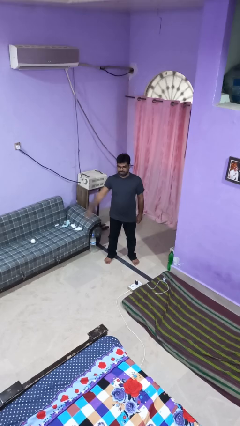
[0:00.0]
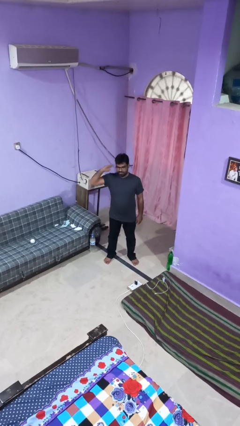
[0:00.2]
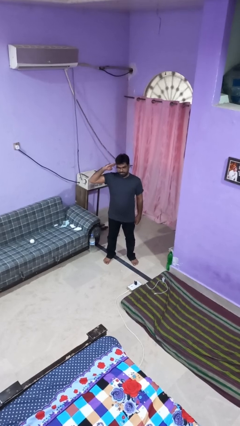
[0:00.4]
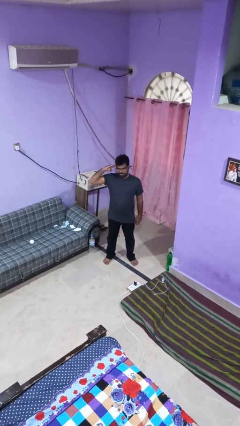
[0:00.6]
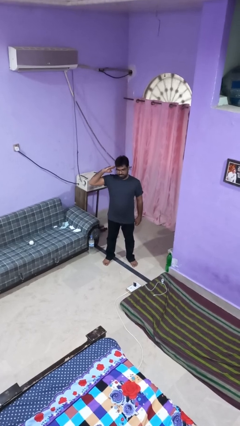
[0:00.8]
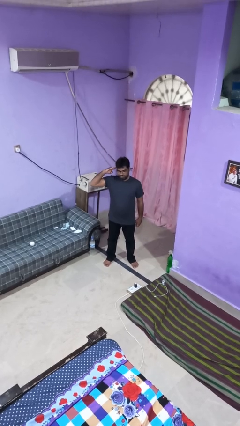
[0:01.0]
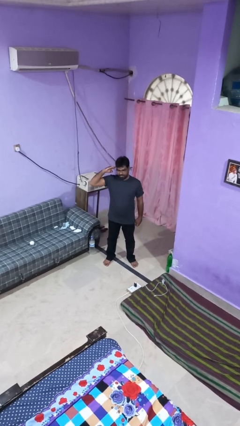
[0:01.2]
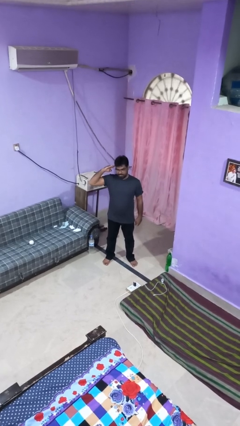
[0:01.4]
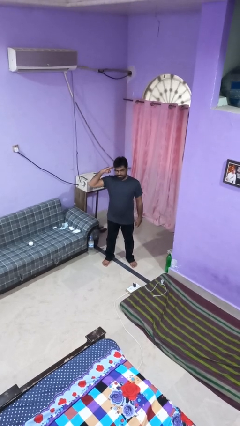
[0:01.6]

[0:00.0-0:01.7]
person salutes

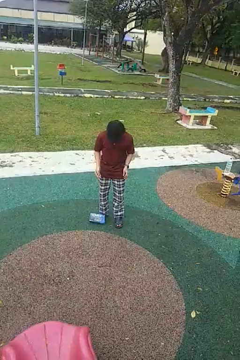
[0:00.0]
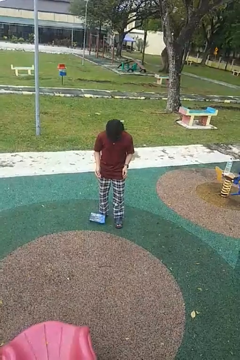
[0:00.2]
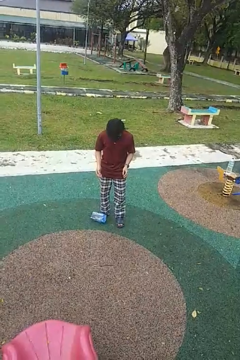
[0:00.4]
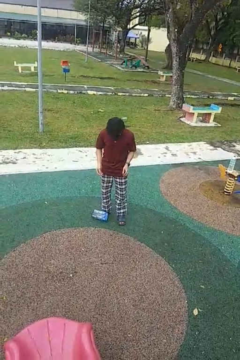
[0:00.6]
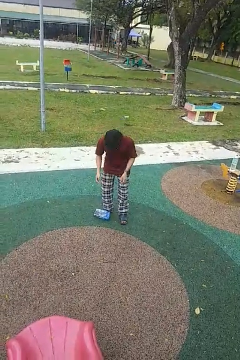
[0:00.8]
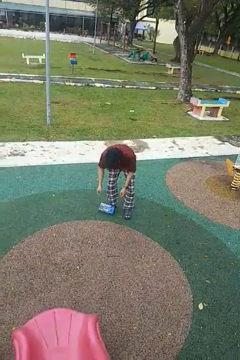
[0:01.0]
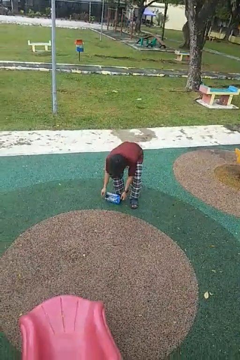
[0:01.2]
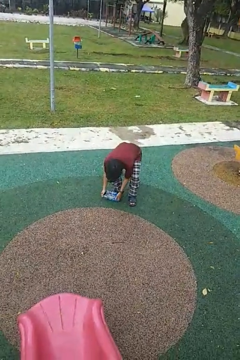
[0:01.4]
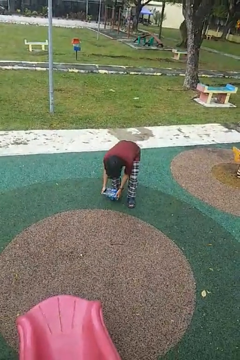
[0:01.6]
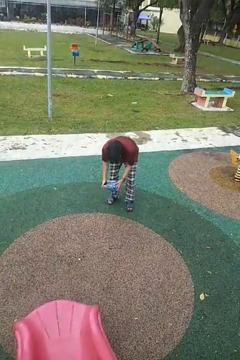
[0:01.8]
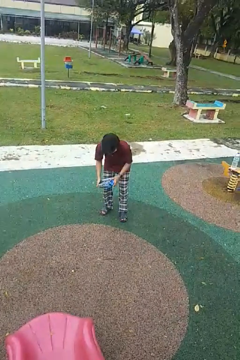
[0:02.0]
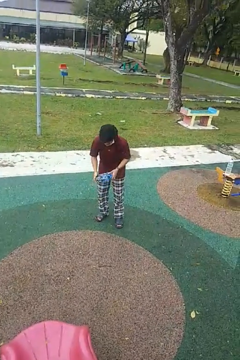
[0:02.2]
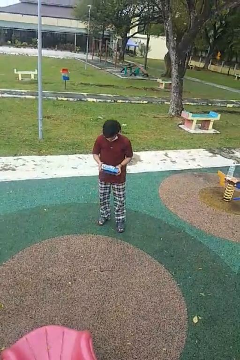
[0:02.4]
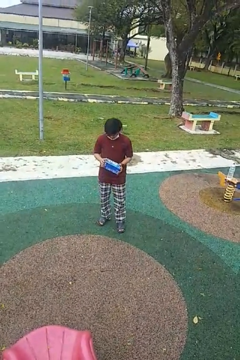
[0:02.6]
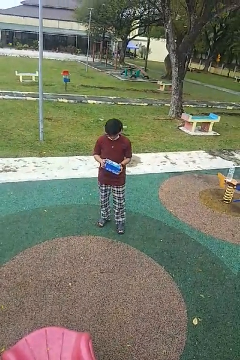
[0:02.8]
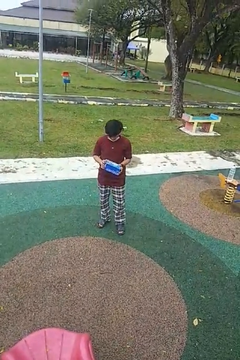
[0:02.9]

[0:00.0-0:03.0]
person picks up object from floor

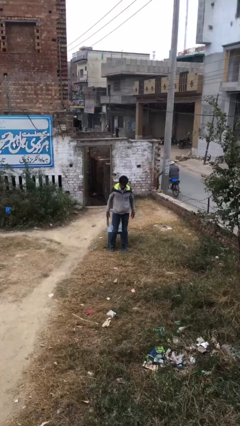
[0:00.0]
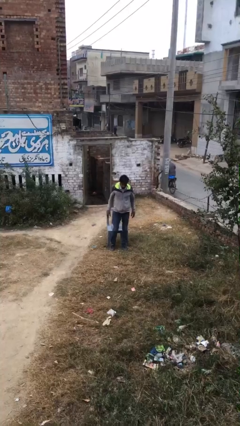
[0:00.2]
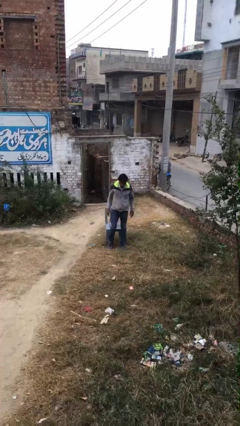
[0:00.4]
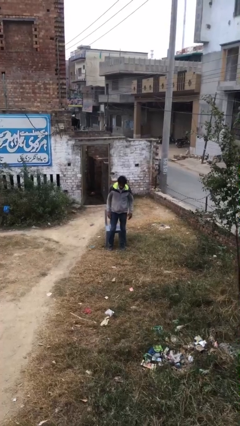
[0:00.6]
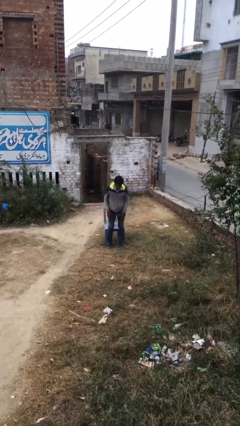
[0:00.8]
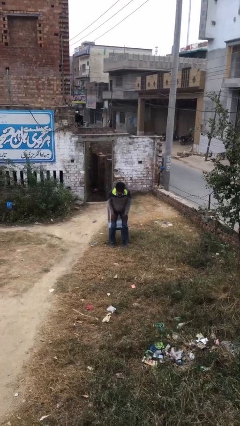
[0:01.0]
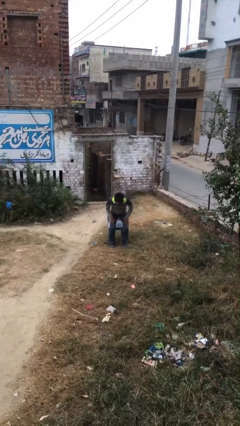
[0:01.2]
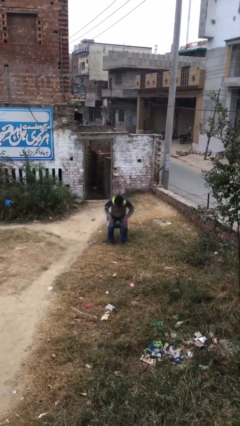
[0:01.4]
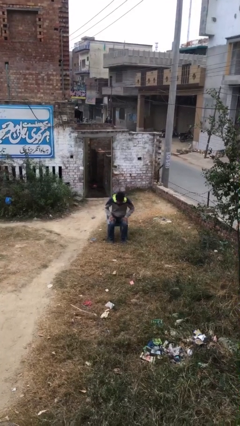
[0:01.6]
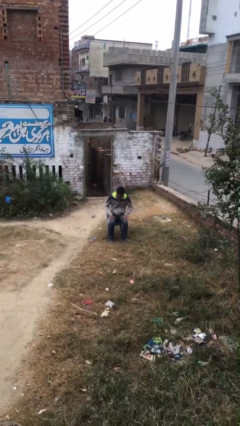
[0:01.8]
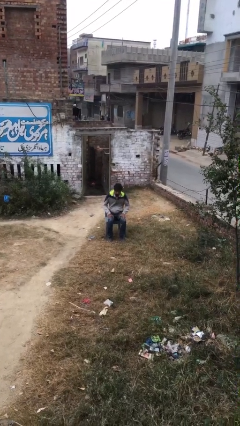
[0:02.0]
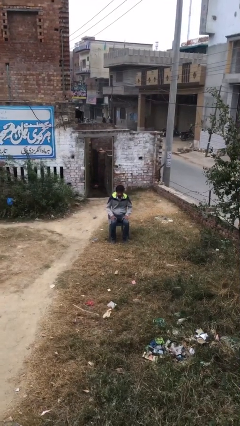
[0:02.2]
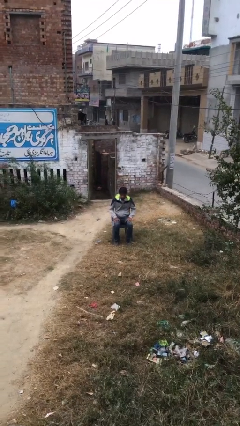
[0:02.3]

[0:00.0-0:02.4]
person sits down

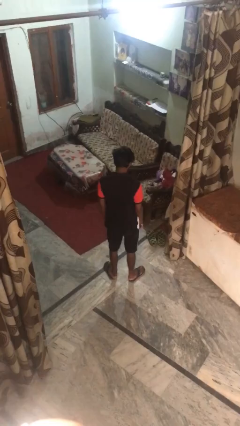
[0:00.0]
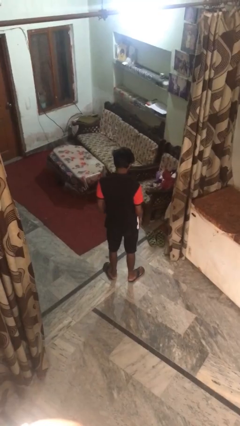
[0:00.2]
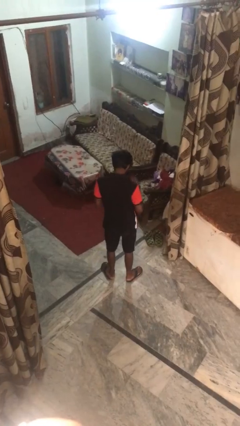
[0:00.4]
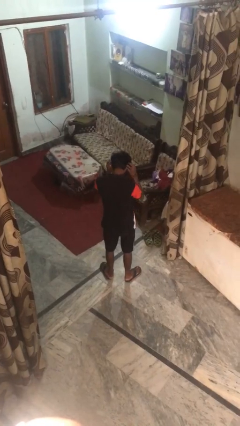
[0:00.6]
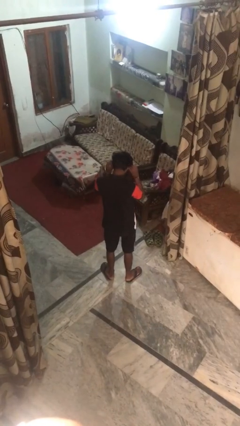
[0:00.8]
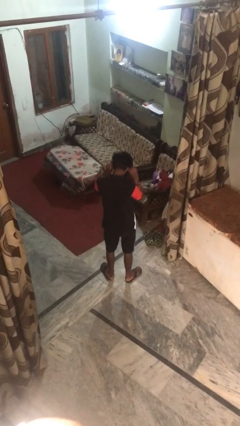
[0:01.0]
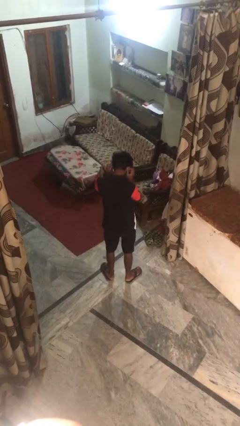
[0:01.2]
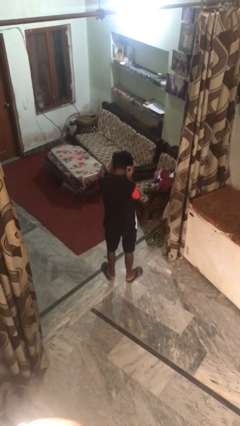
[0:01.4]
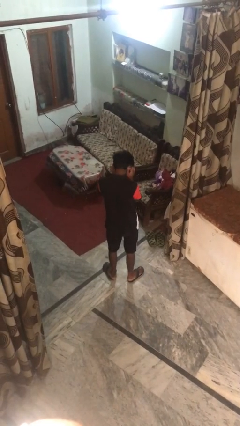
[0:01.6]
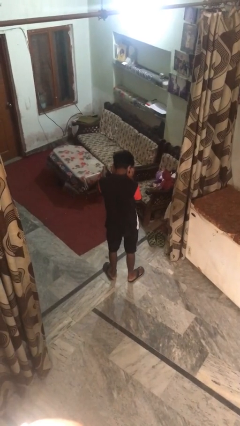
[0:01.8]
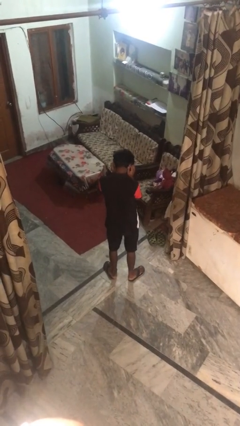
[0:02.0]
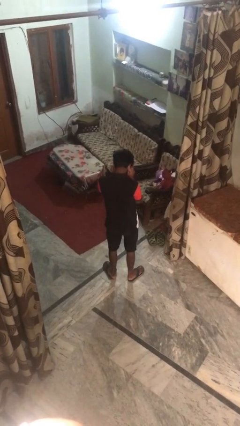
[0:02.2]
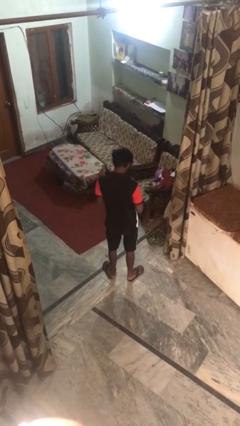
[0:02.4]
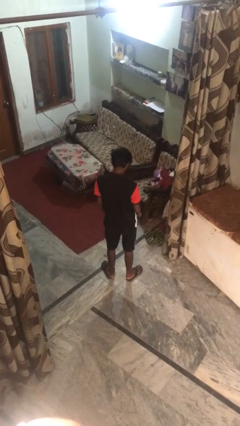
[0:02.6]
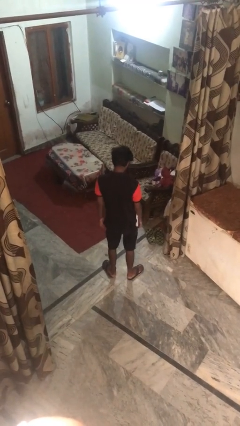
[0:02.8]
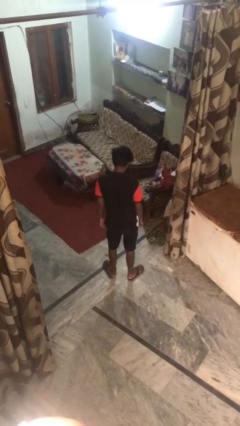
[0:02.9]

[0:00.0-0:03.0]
person touches earlobe

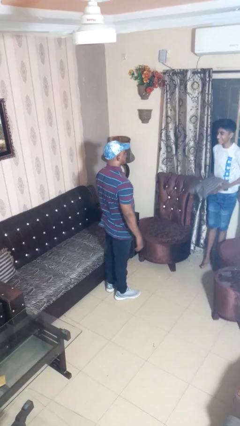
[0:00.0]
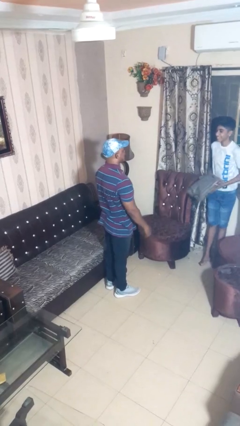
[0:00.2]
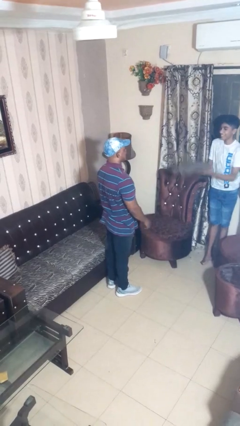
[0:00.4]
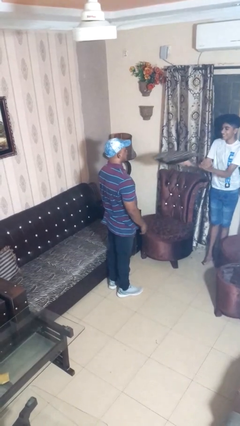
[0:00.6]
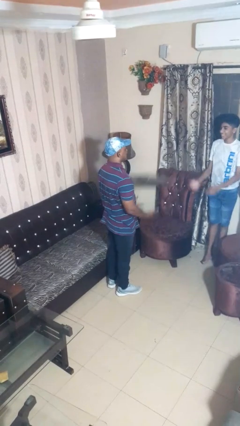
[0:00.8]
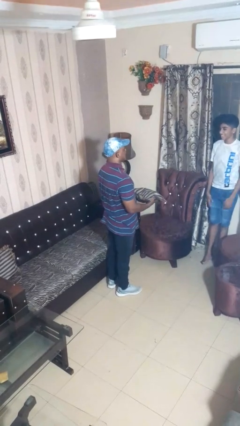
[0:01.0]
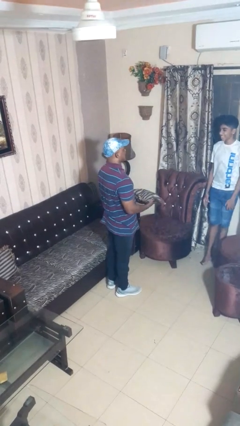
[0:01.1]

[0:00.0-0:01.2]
person catches object from person

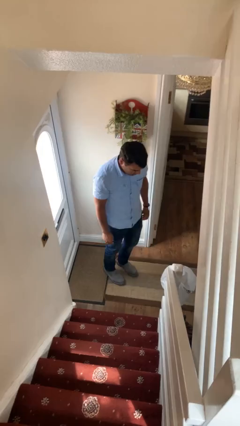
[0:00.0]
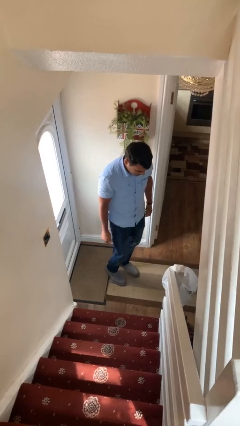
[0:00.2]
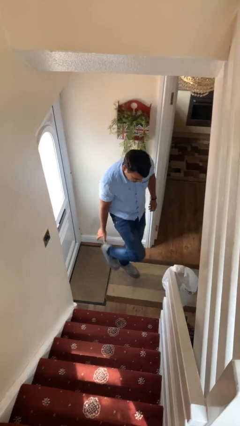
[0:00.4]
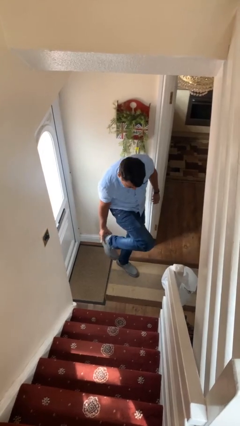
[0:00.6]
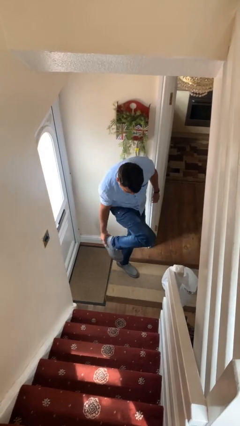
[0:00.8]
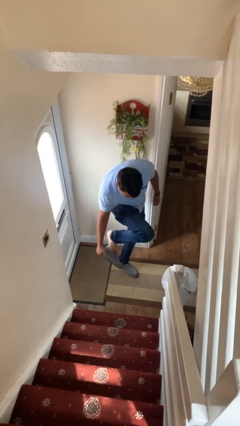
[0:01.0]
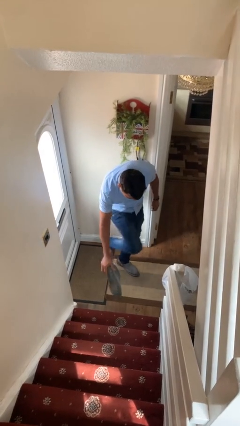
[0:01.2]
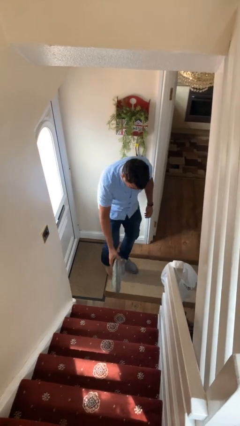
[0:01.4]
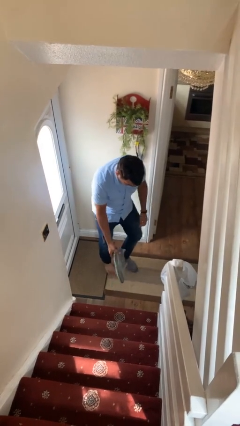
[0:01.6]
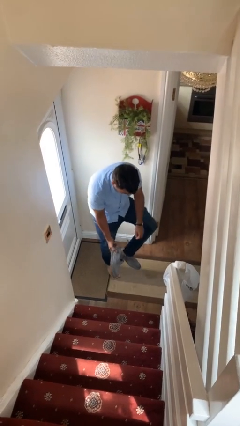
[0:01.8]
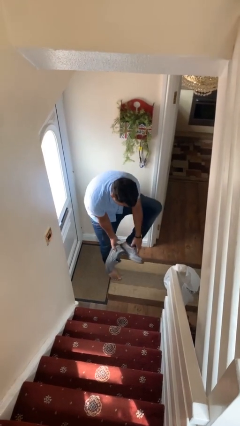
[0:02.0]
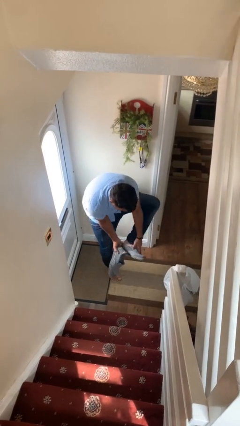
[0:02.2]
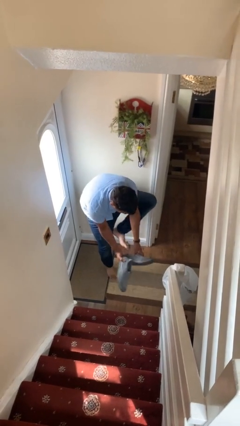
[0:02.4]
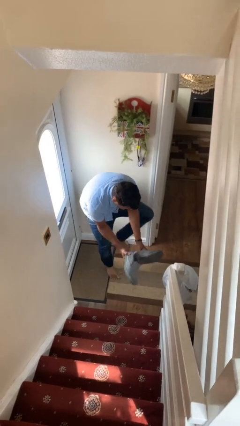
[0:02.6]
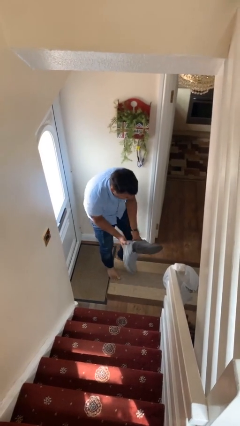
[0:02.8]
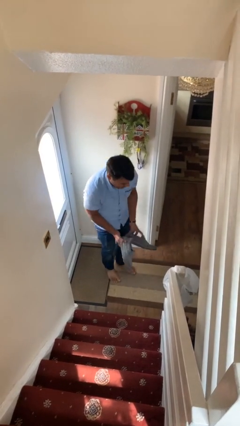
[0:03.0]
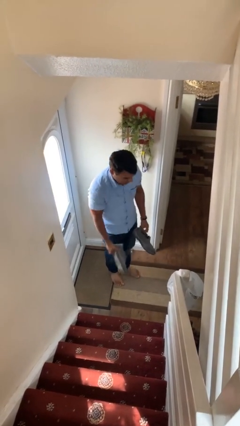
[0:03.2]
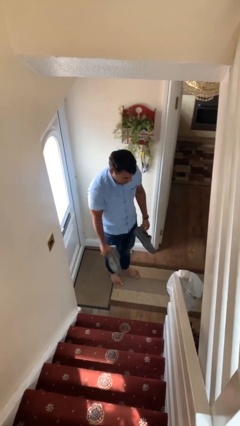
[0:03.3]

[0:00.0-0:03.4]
person takes off shoes

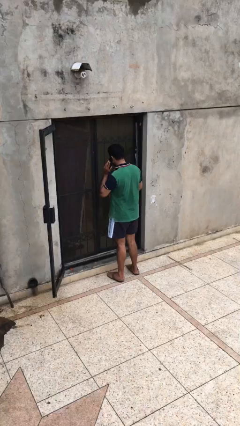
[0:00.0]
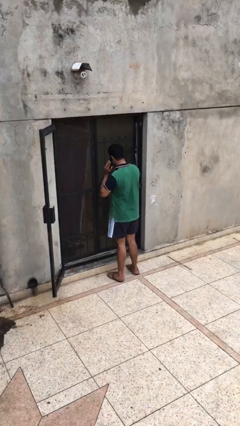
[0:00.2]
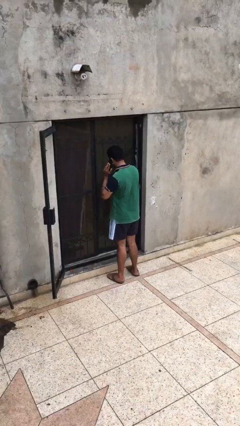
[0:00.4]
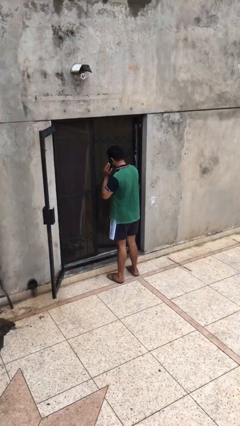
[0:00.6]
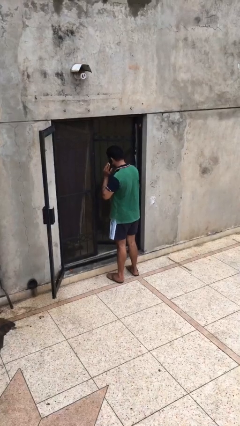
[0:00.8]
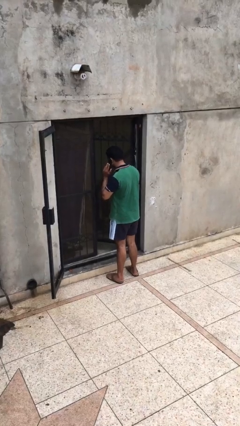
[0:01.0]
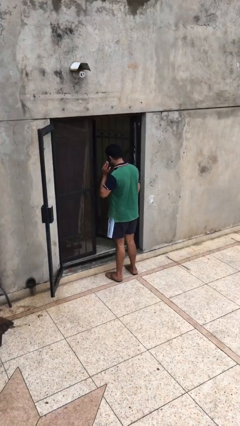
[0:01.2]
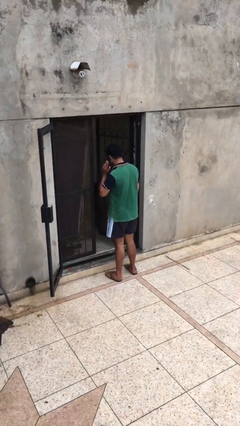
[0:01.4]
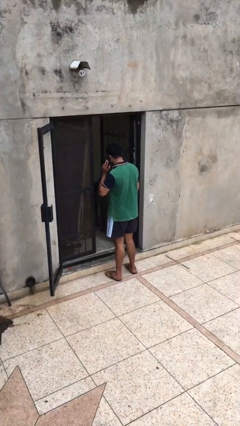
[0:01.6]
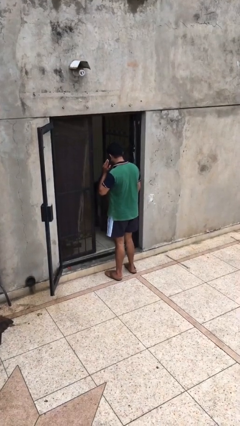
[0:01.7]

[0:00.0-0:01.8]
person opens facility door

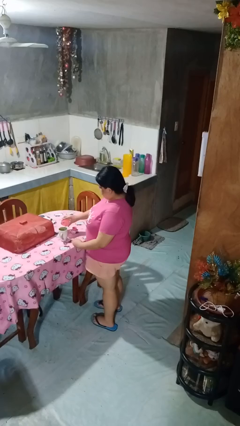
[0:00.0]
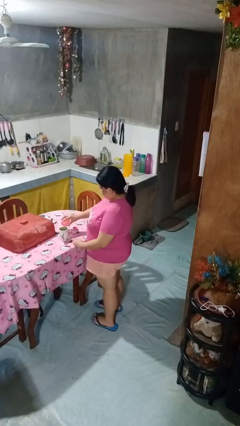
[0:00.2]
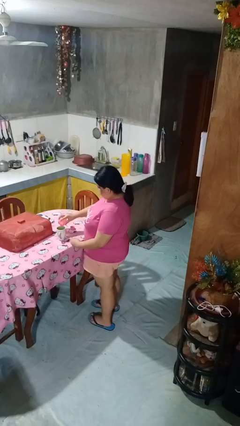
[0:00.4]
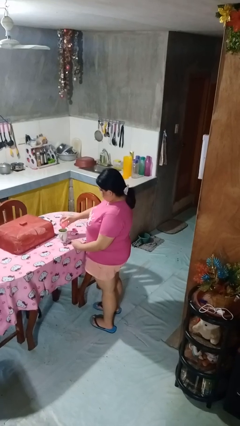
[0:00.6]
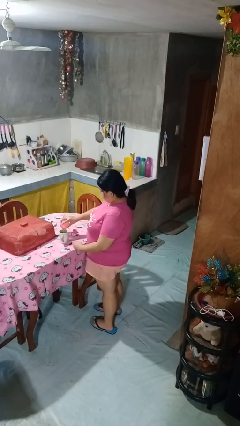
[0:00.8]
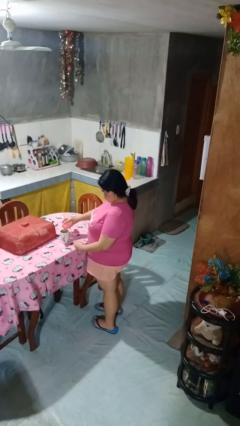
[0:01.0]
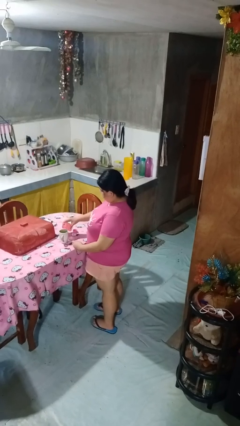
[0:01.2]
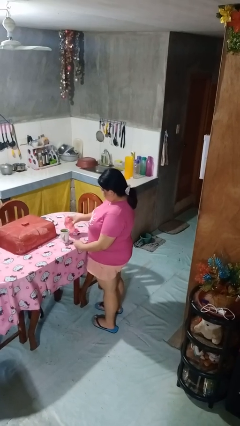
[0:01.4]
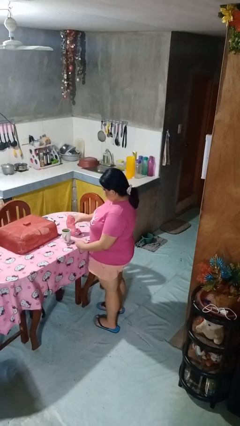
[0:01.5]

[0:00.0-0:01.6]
person pours liquid into cup
